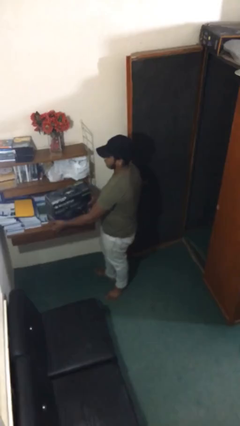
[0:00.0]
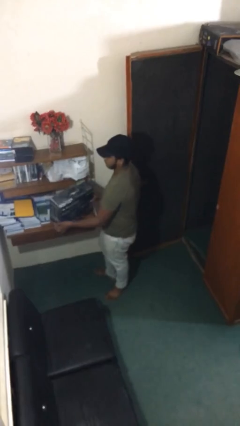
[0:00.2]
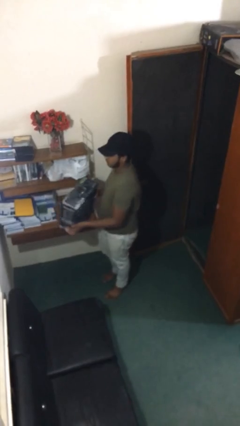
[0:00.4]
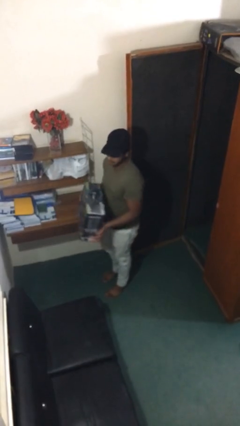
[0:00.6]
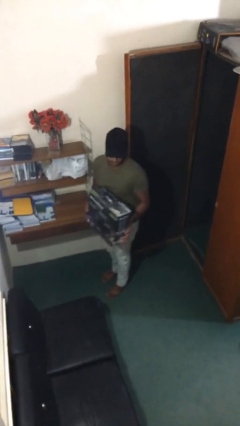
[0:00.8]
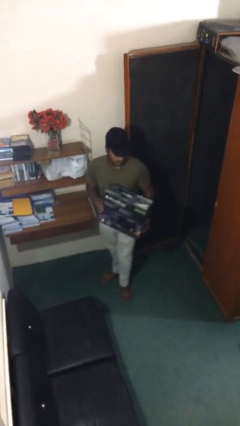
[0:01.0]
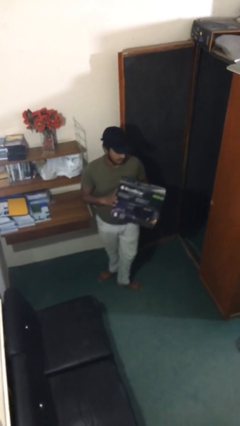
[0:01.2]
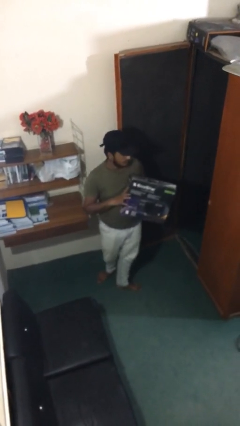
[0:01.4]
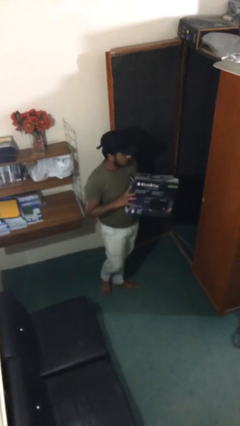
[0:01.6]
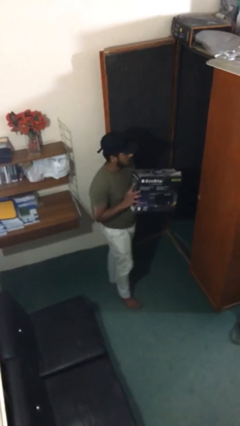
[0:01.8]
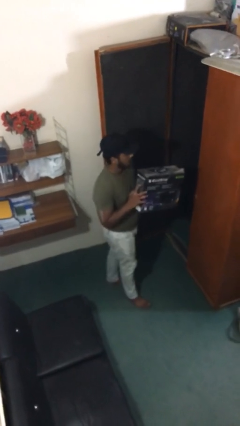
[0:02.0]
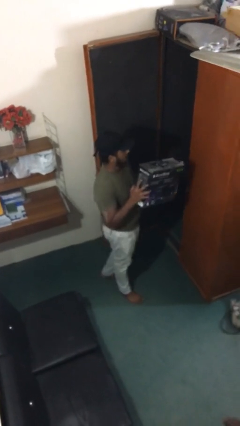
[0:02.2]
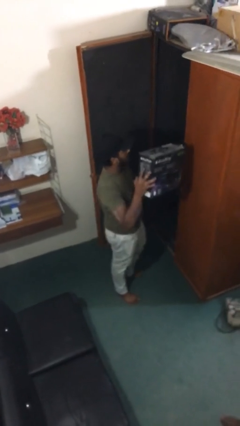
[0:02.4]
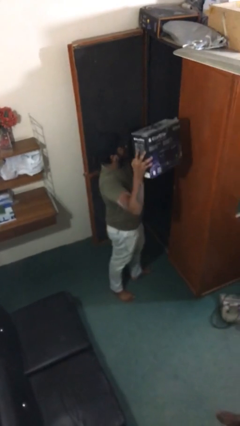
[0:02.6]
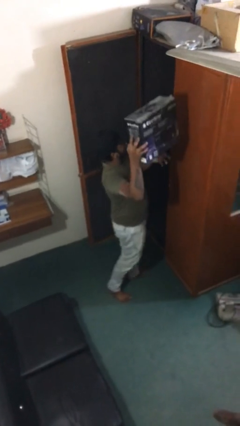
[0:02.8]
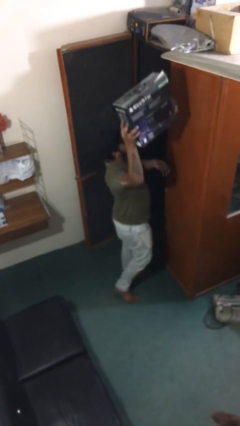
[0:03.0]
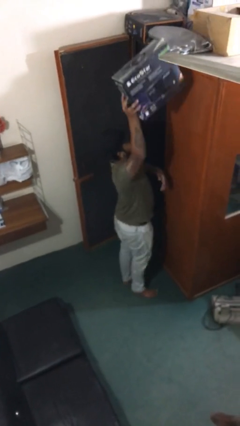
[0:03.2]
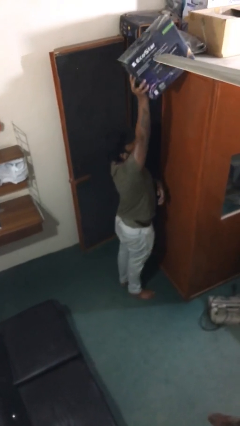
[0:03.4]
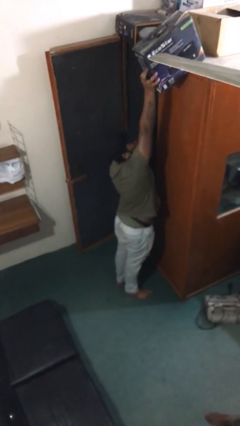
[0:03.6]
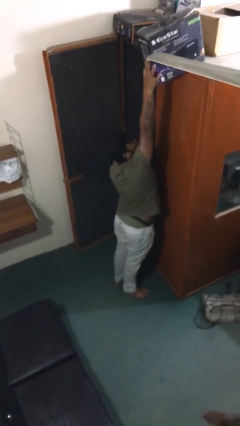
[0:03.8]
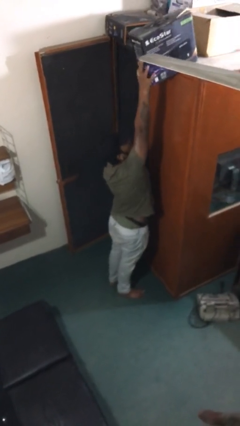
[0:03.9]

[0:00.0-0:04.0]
person picks up object from table

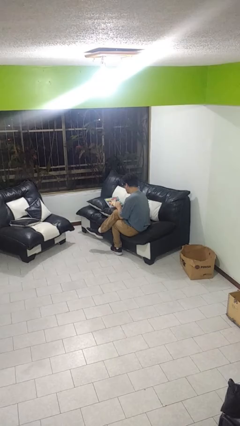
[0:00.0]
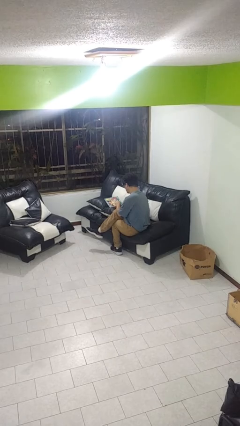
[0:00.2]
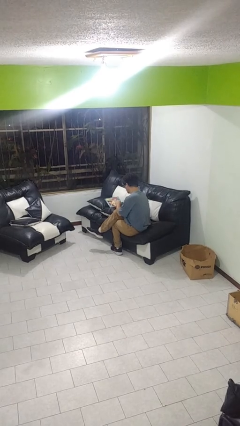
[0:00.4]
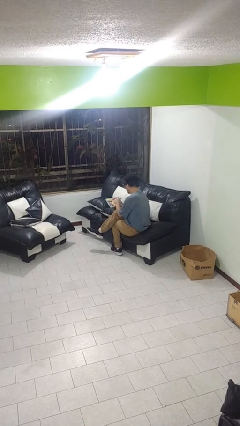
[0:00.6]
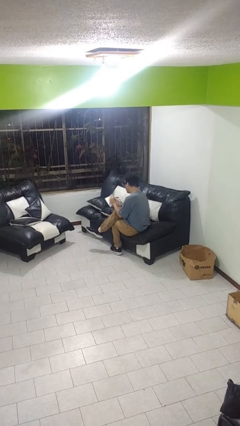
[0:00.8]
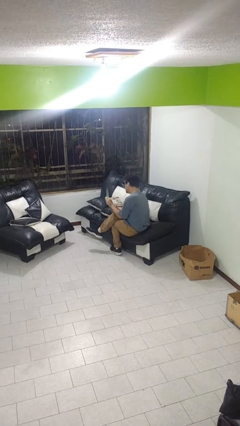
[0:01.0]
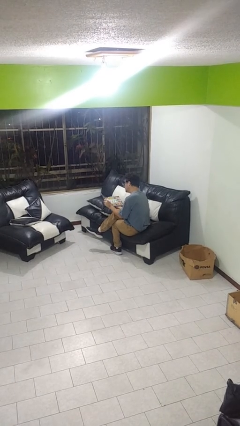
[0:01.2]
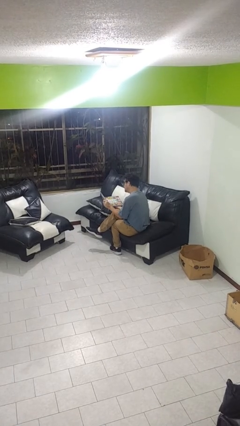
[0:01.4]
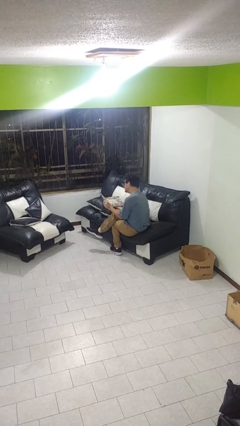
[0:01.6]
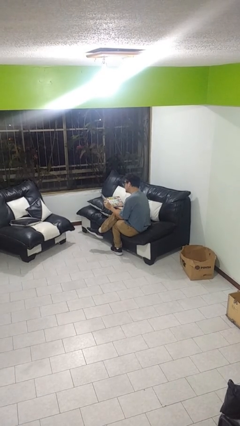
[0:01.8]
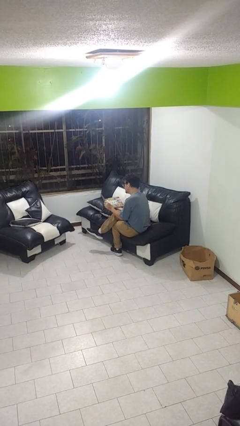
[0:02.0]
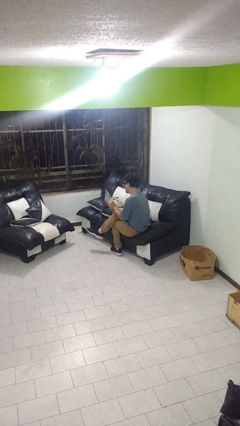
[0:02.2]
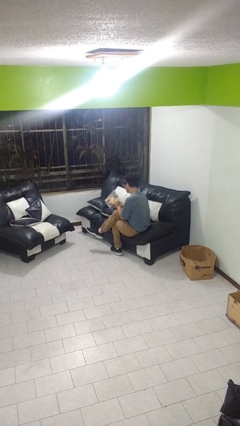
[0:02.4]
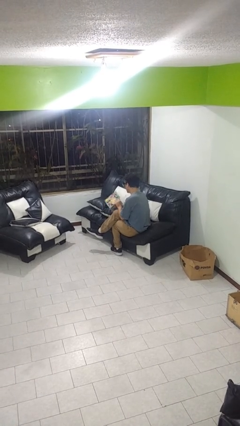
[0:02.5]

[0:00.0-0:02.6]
person reads magazine

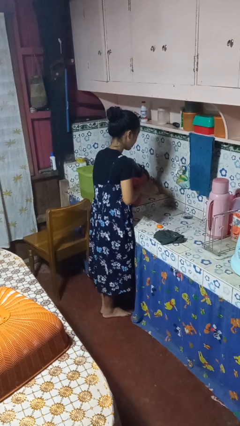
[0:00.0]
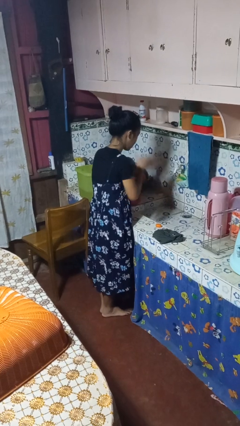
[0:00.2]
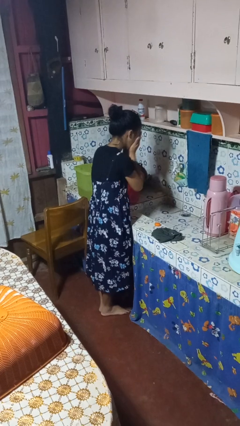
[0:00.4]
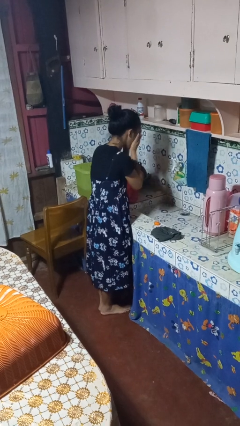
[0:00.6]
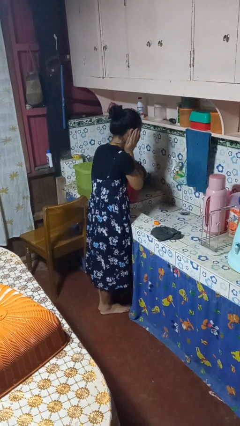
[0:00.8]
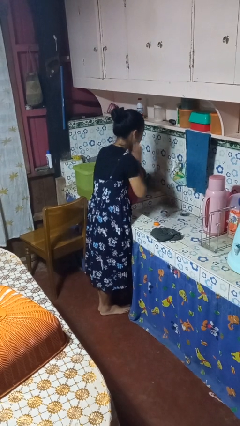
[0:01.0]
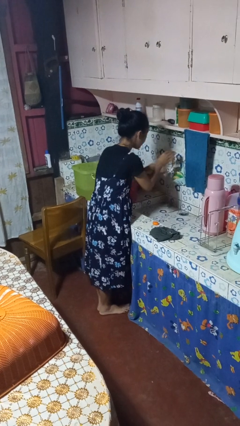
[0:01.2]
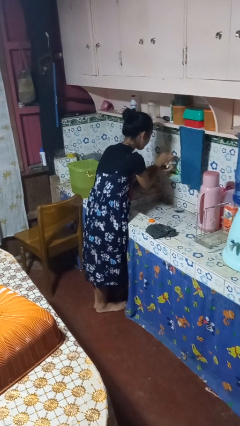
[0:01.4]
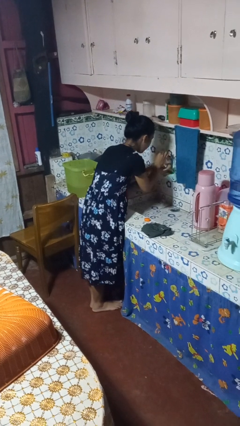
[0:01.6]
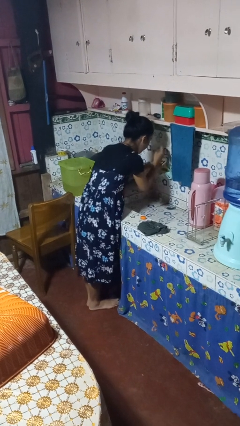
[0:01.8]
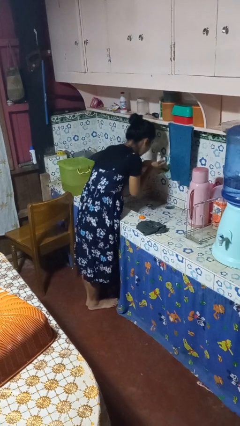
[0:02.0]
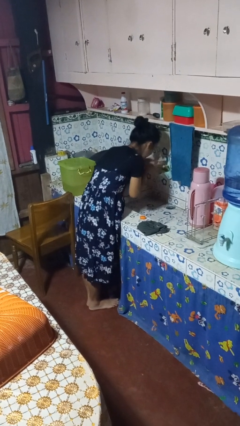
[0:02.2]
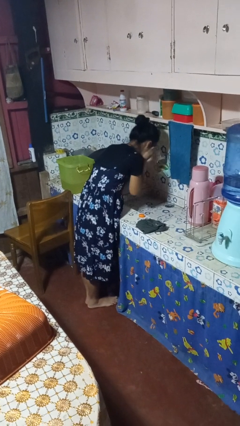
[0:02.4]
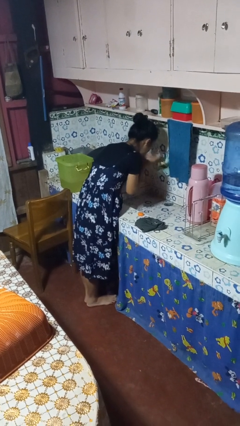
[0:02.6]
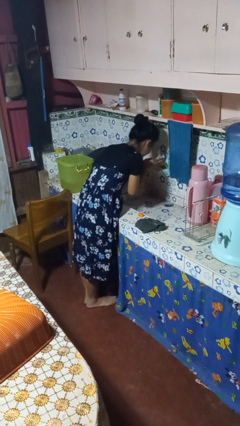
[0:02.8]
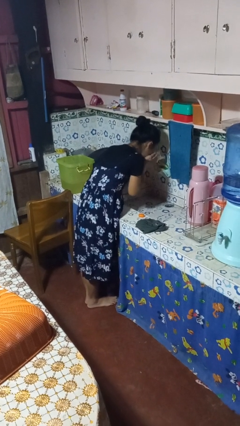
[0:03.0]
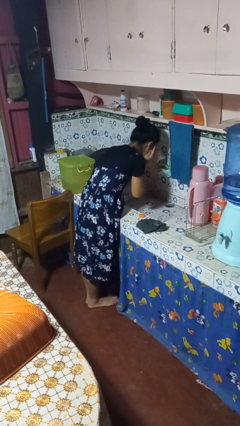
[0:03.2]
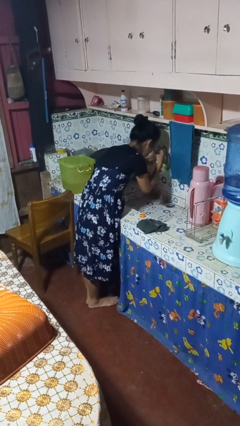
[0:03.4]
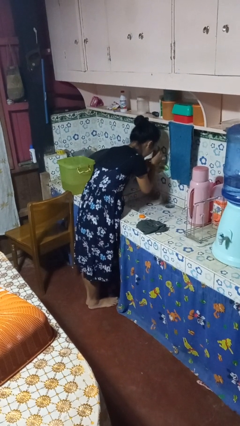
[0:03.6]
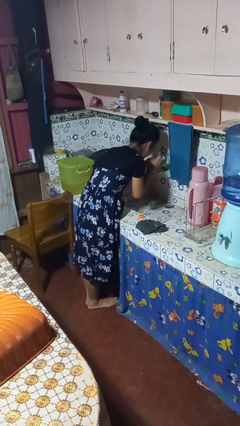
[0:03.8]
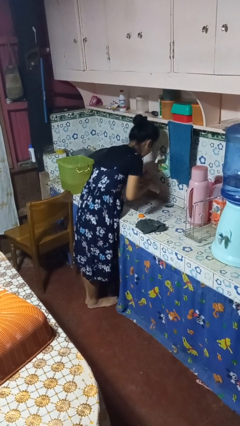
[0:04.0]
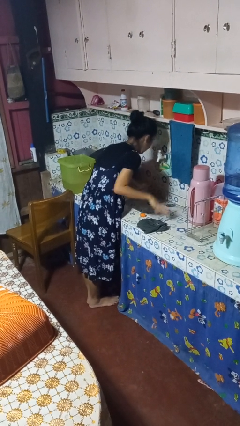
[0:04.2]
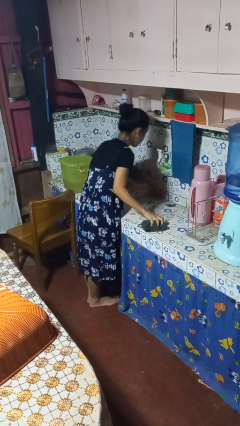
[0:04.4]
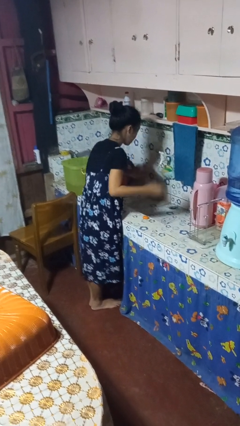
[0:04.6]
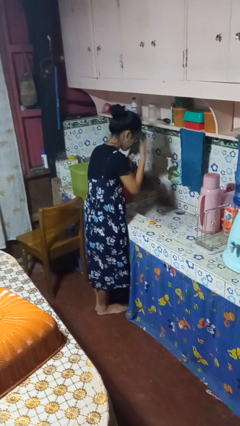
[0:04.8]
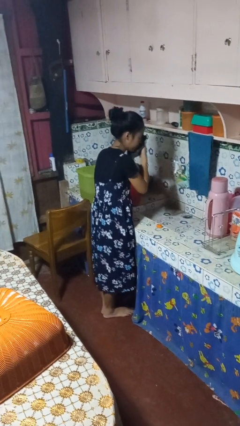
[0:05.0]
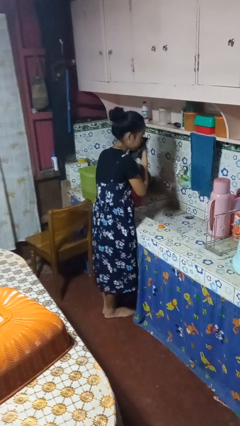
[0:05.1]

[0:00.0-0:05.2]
person washes face

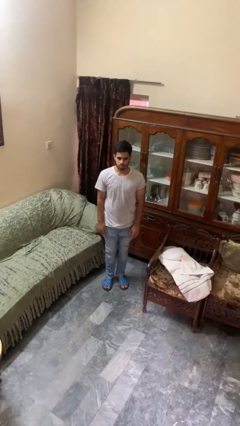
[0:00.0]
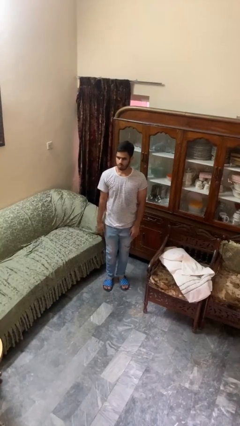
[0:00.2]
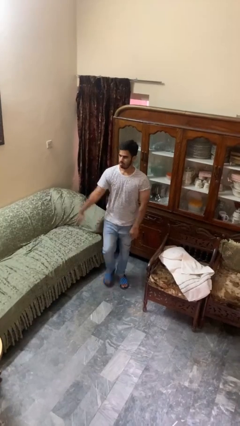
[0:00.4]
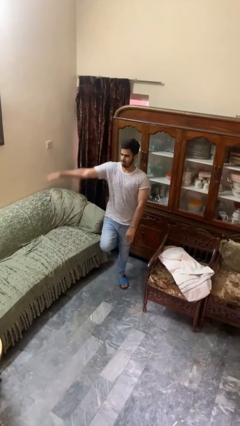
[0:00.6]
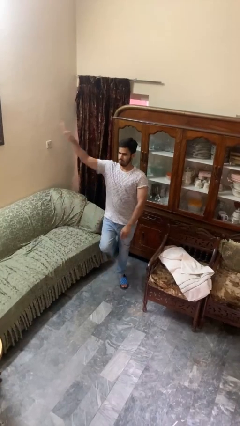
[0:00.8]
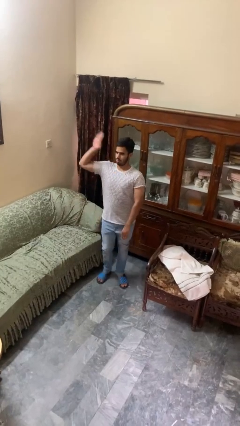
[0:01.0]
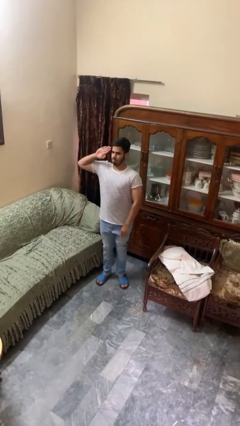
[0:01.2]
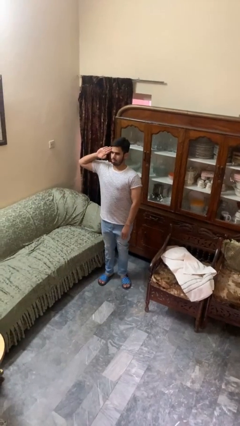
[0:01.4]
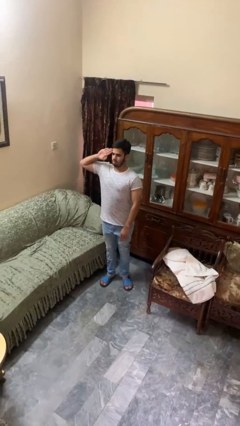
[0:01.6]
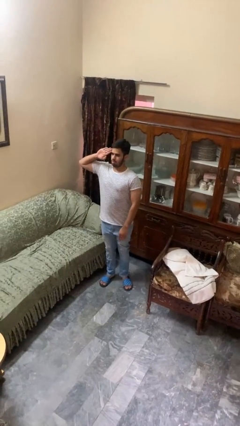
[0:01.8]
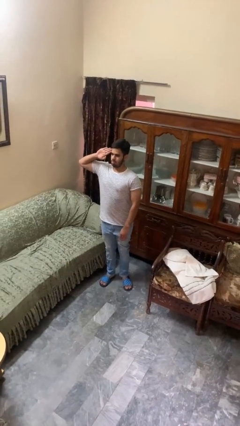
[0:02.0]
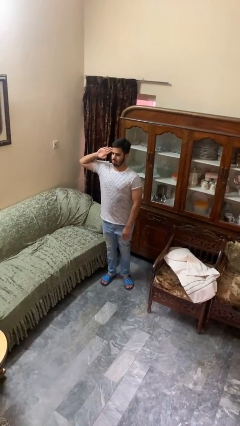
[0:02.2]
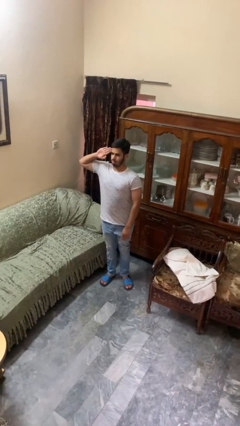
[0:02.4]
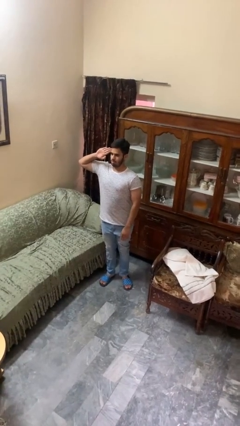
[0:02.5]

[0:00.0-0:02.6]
person salutes

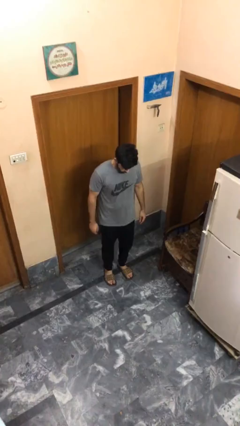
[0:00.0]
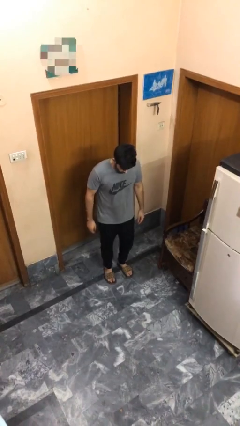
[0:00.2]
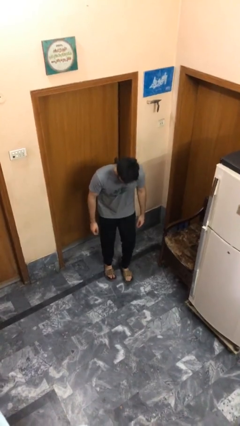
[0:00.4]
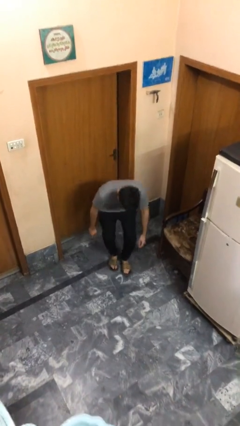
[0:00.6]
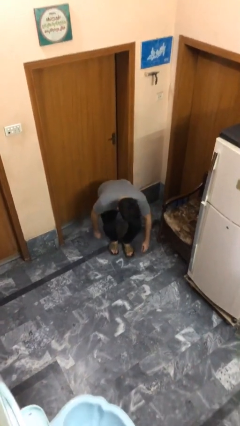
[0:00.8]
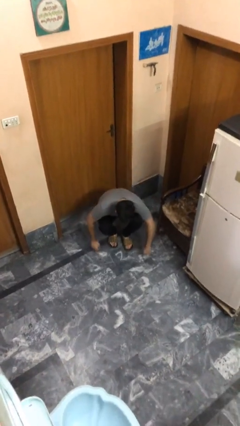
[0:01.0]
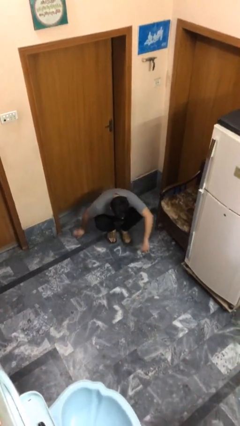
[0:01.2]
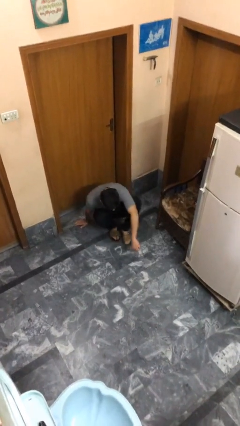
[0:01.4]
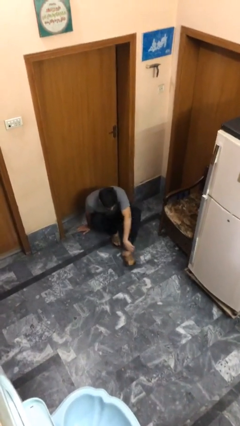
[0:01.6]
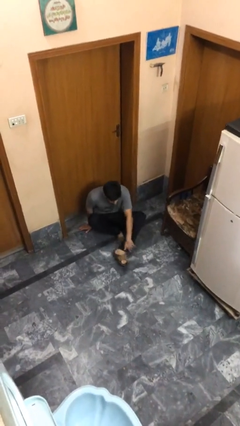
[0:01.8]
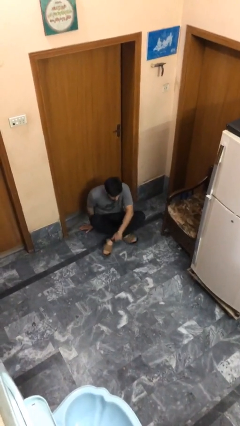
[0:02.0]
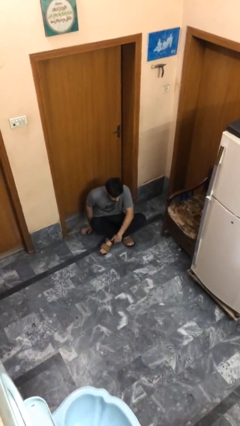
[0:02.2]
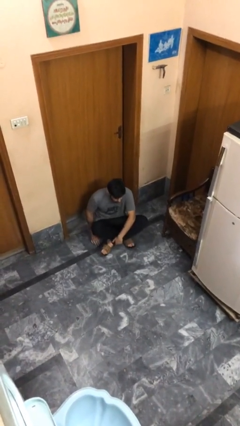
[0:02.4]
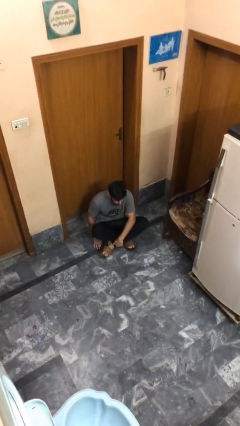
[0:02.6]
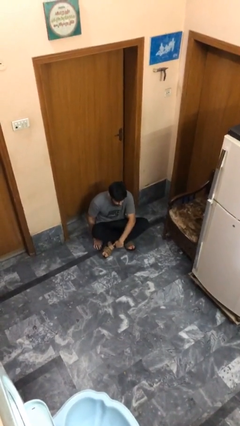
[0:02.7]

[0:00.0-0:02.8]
person sits crisscross

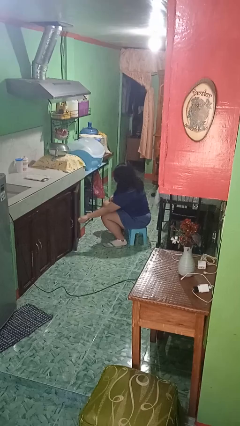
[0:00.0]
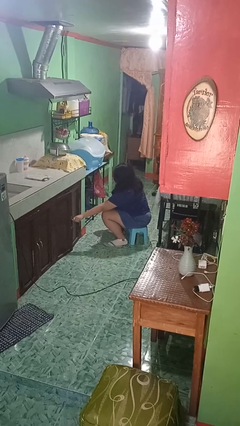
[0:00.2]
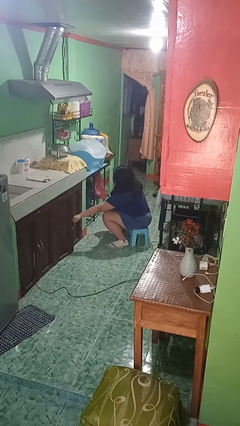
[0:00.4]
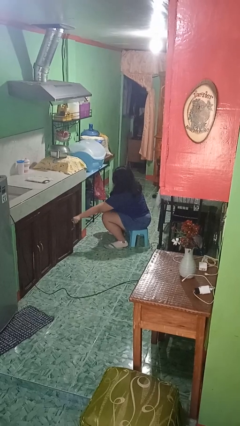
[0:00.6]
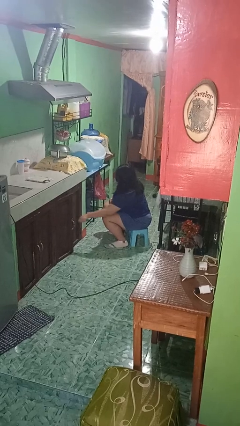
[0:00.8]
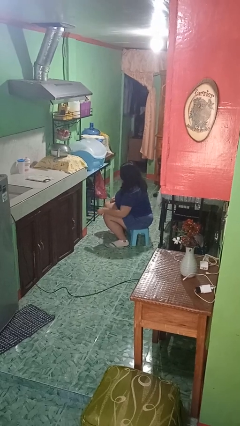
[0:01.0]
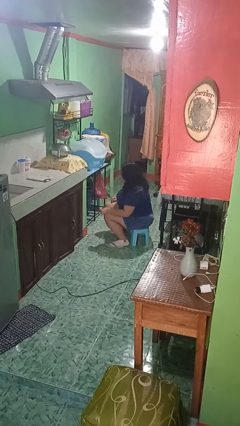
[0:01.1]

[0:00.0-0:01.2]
person closes cabinet
